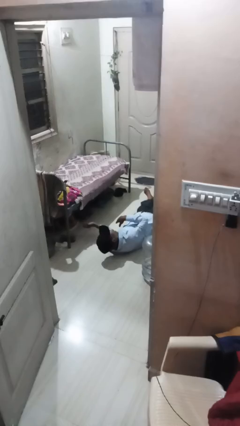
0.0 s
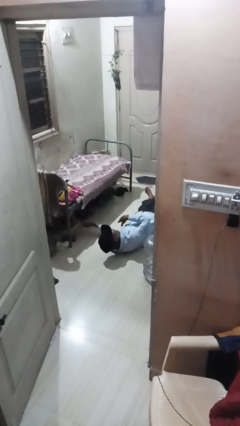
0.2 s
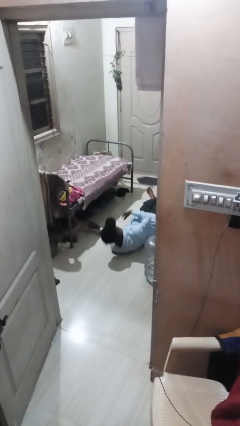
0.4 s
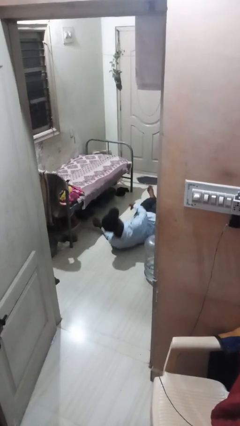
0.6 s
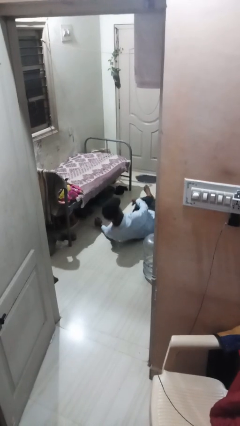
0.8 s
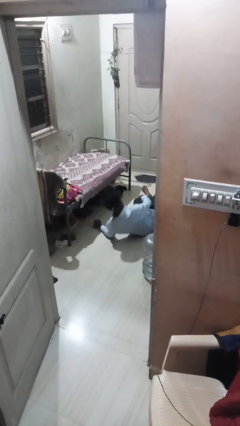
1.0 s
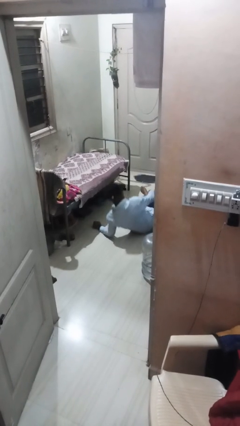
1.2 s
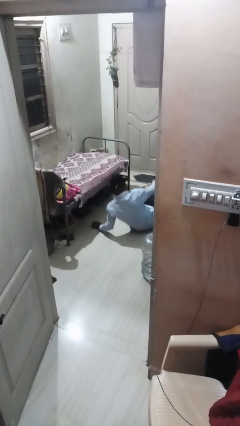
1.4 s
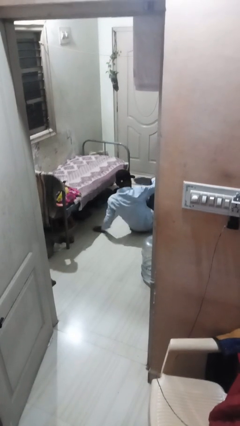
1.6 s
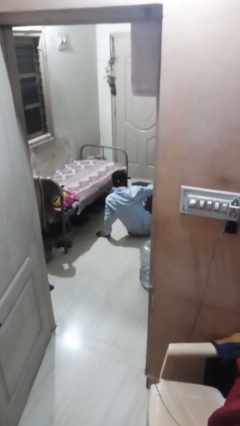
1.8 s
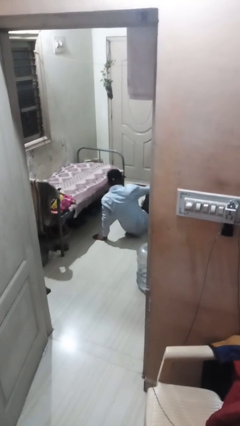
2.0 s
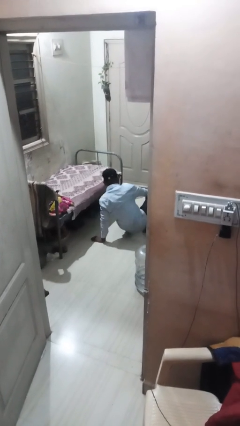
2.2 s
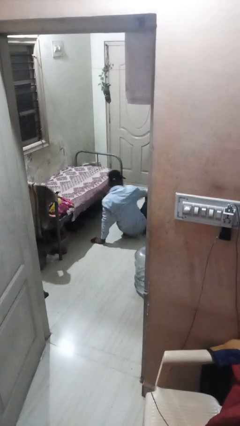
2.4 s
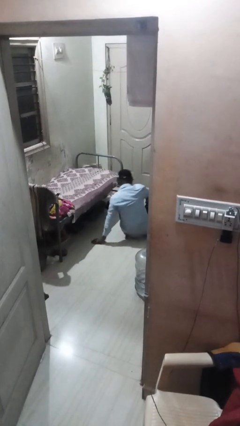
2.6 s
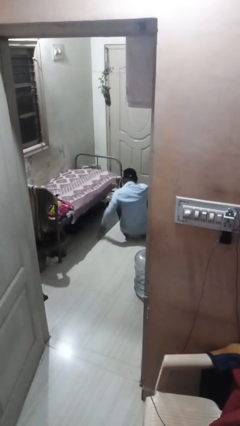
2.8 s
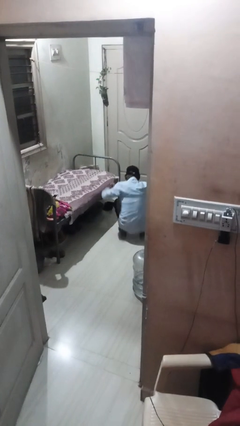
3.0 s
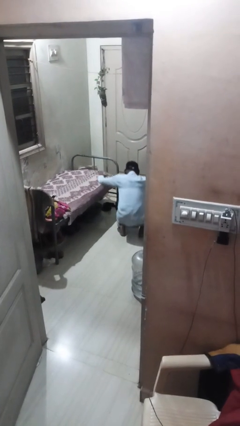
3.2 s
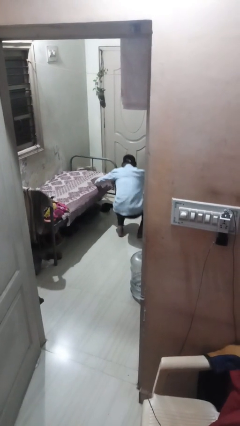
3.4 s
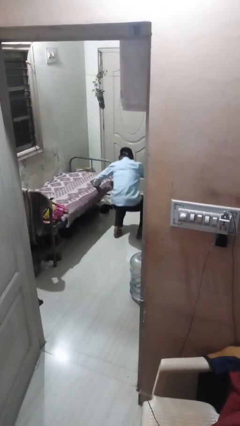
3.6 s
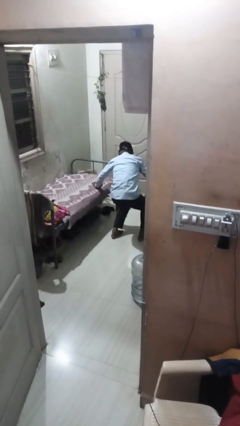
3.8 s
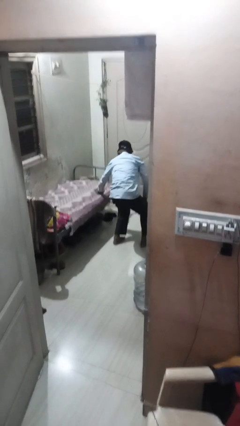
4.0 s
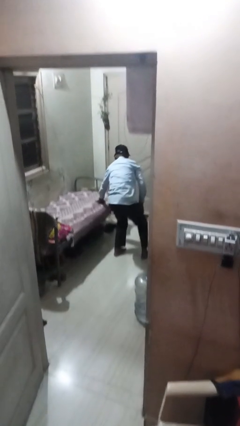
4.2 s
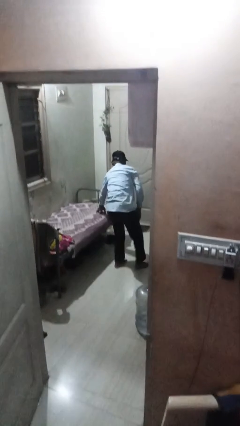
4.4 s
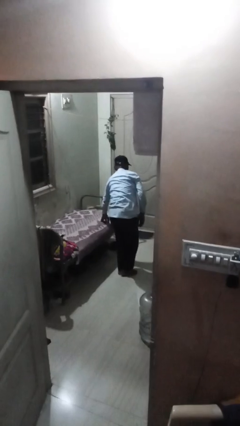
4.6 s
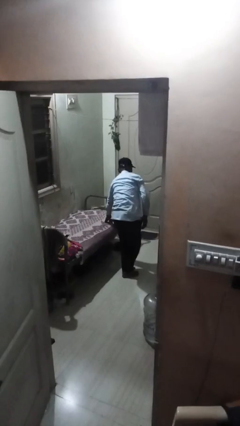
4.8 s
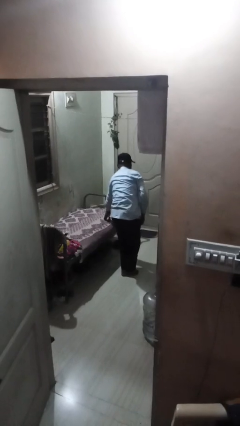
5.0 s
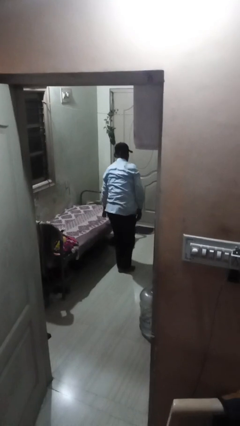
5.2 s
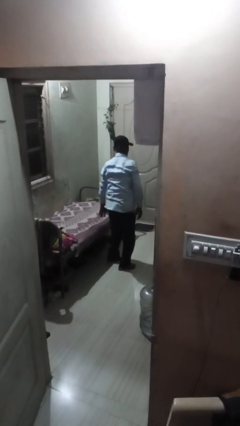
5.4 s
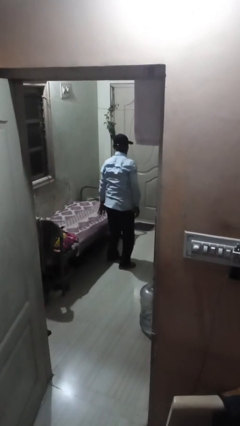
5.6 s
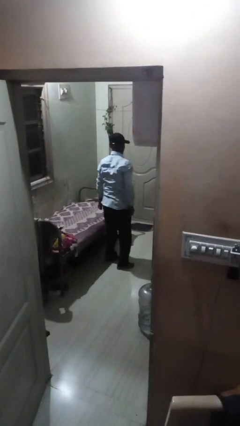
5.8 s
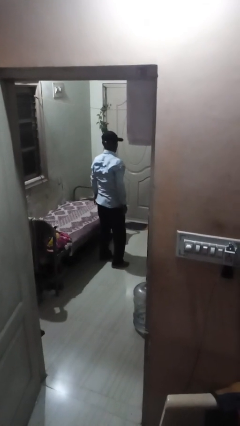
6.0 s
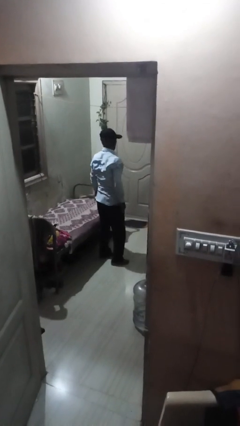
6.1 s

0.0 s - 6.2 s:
person stands up from floor

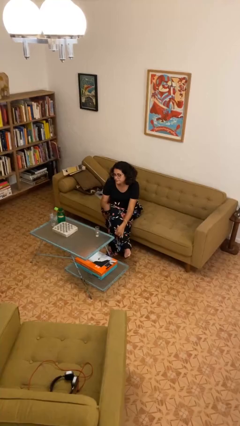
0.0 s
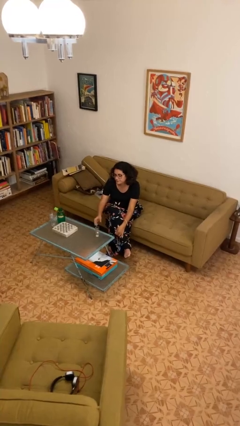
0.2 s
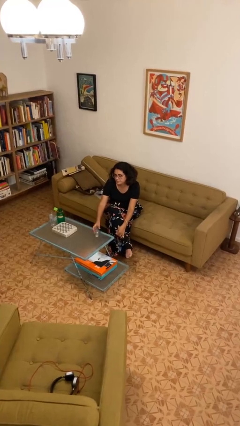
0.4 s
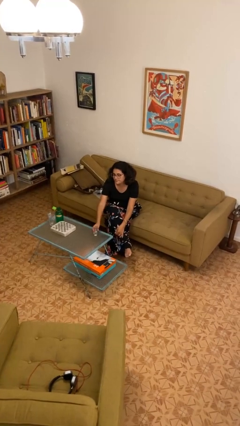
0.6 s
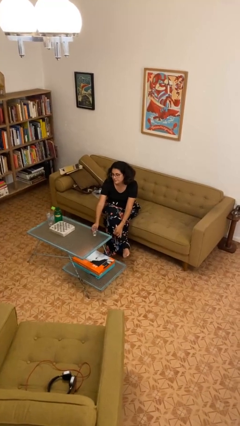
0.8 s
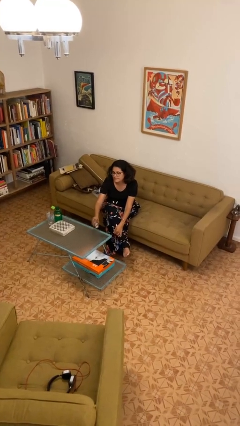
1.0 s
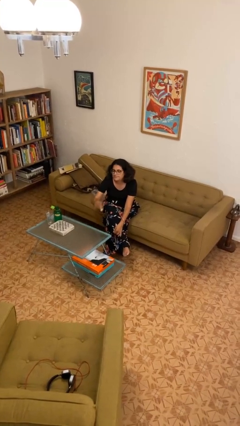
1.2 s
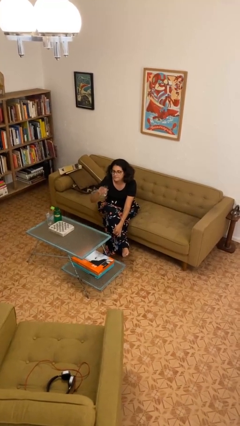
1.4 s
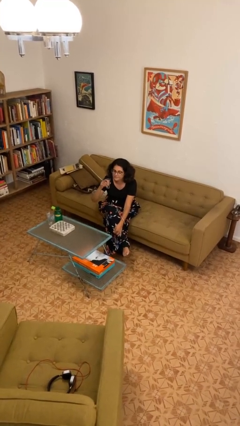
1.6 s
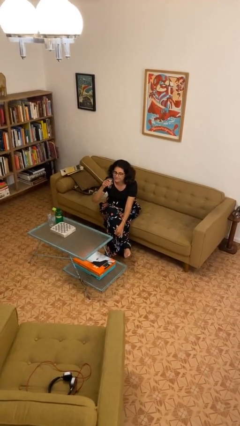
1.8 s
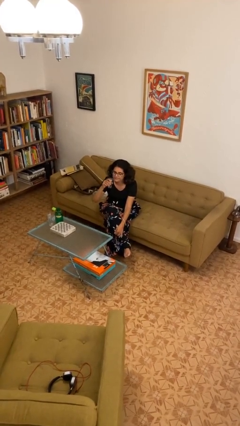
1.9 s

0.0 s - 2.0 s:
person picks up object from table

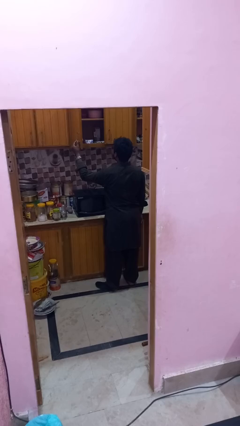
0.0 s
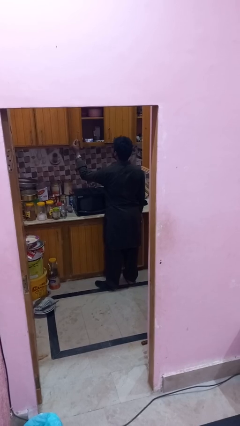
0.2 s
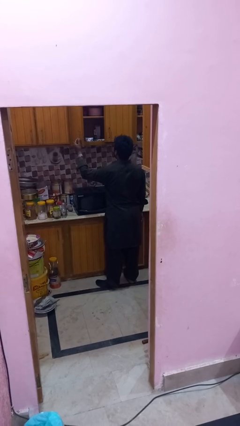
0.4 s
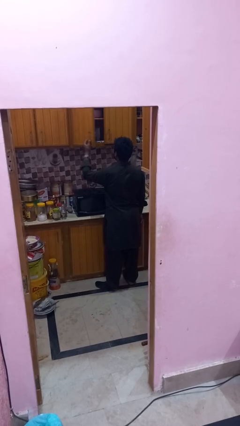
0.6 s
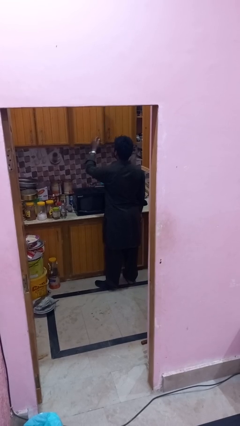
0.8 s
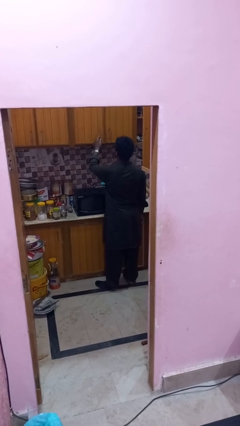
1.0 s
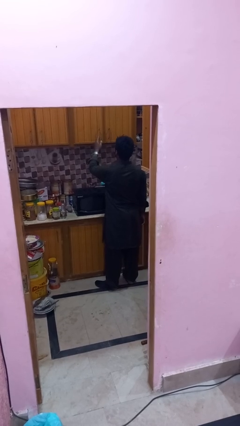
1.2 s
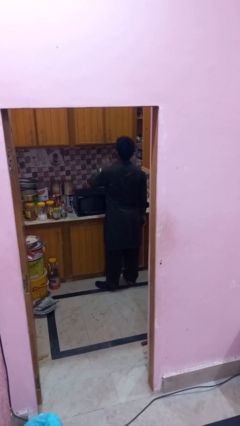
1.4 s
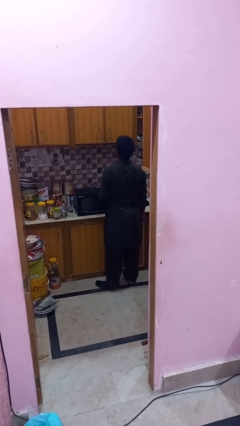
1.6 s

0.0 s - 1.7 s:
person closes cabinet

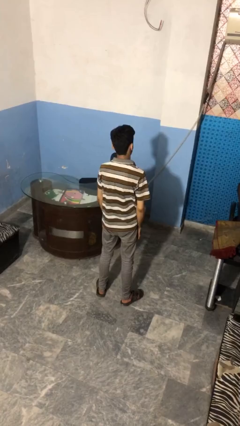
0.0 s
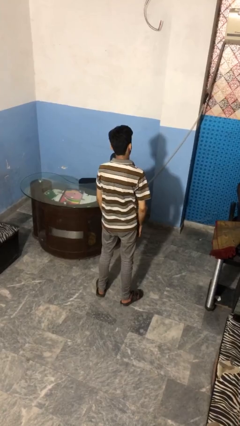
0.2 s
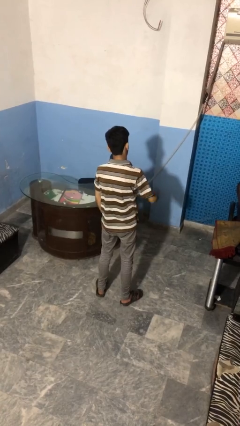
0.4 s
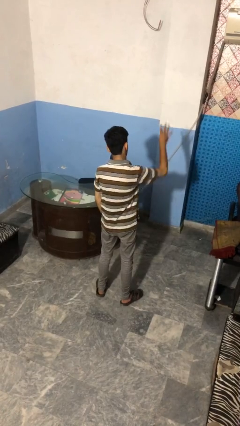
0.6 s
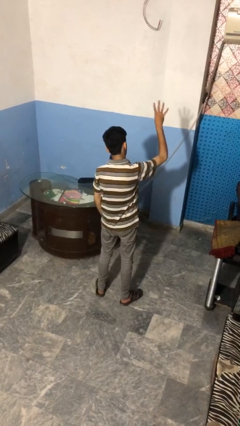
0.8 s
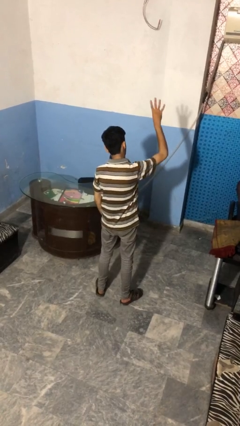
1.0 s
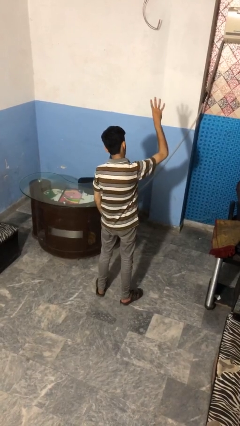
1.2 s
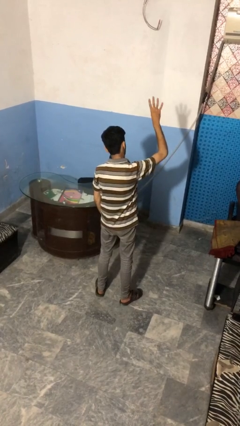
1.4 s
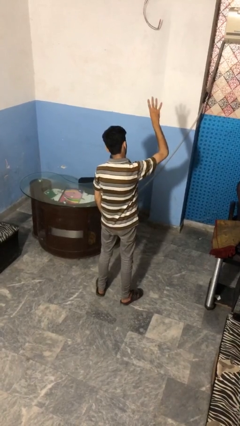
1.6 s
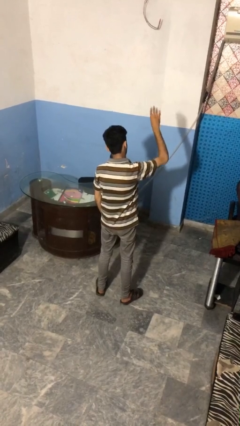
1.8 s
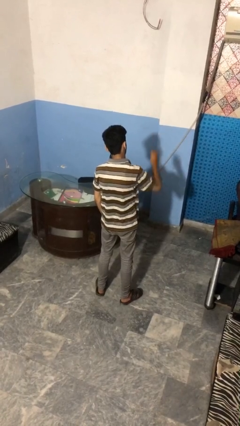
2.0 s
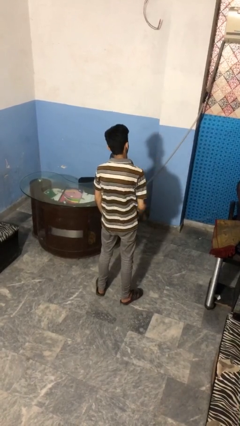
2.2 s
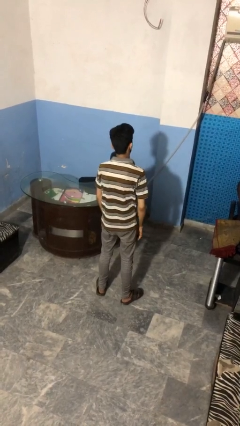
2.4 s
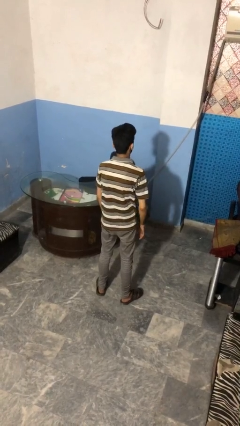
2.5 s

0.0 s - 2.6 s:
person gestures number four

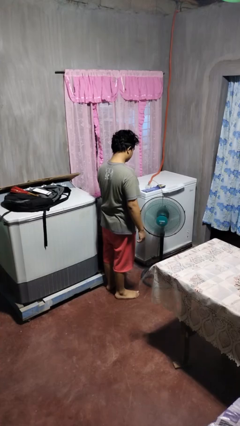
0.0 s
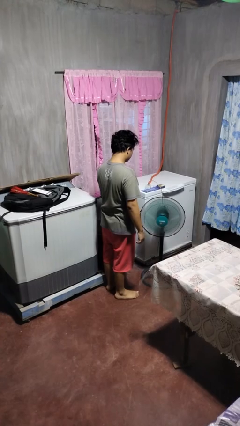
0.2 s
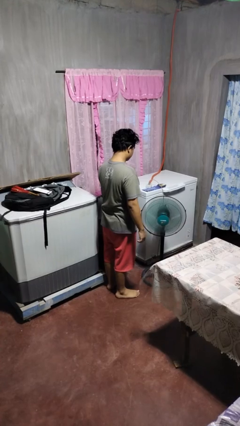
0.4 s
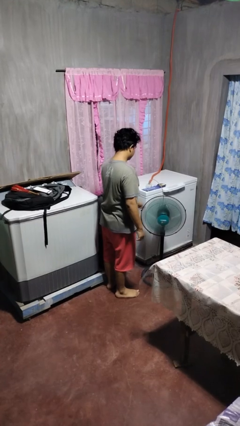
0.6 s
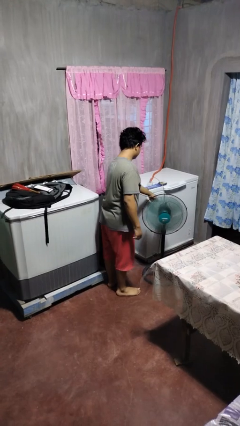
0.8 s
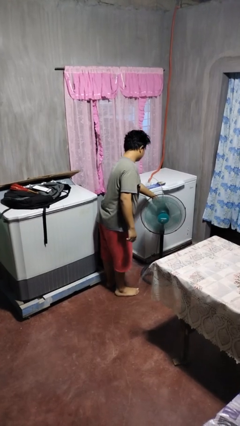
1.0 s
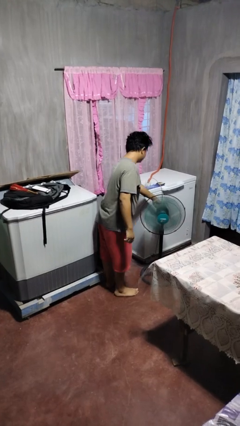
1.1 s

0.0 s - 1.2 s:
person turns on fan

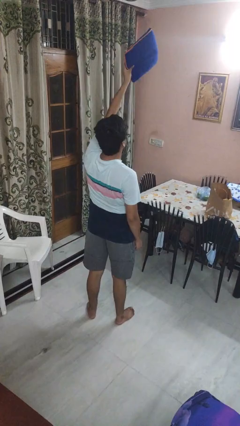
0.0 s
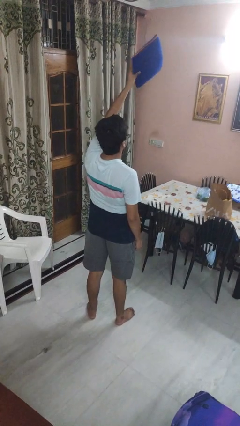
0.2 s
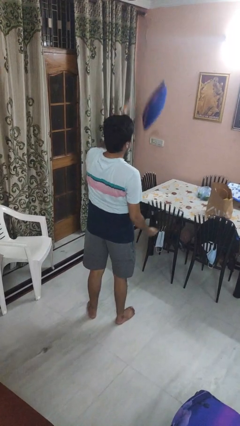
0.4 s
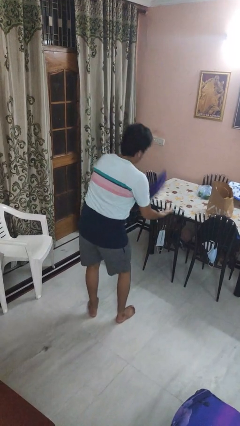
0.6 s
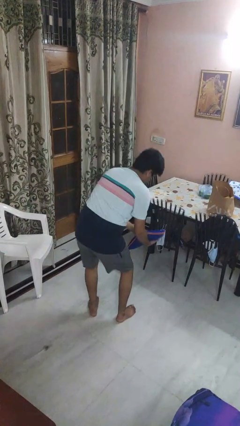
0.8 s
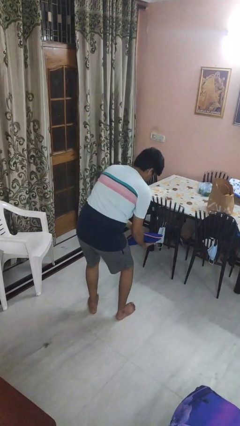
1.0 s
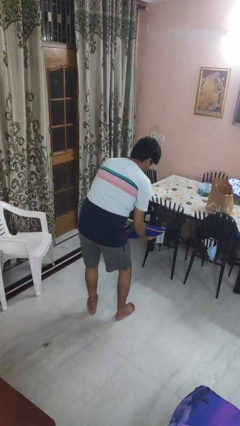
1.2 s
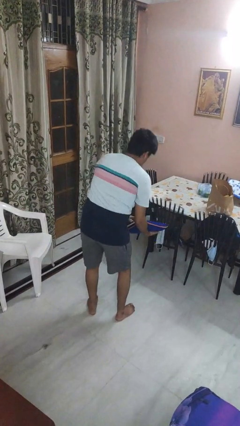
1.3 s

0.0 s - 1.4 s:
person catches dropped object

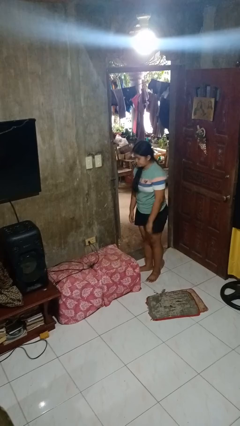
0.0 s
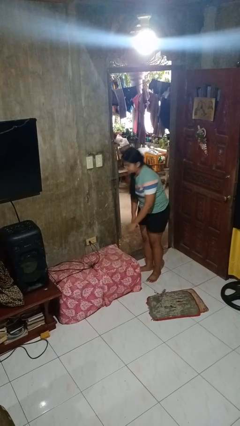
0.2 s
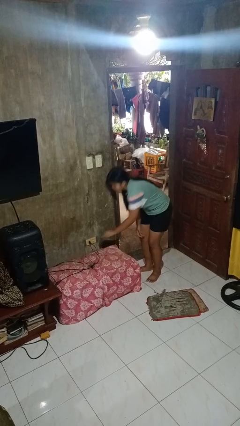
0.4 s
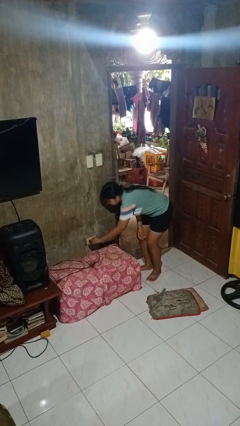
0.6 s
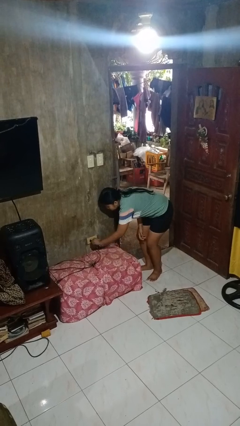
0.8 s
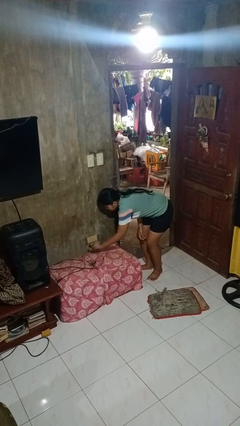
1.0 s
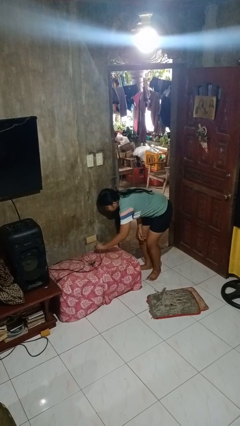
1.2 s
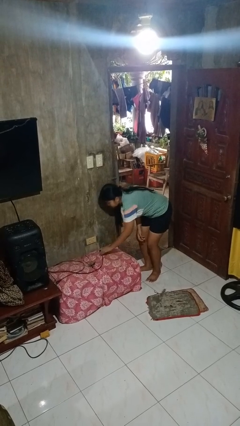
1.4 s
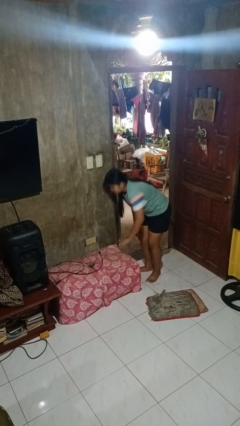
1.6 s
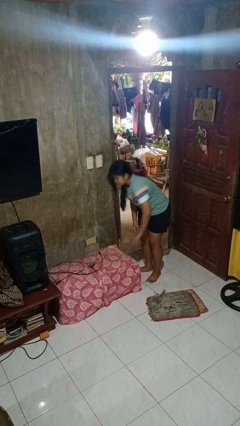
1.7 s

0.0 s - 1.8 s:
person unplugs from electrical socket

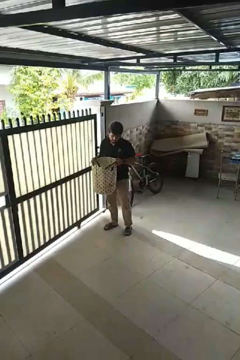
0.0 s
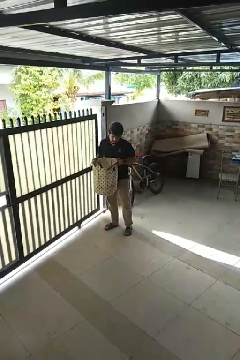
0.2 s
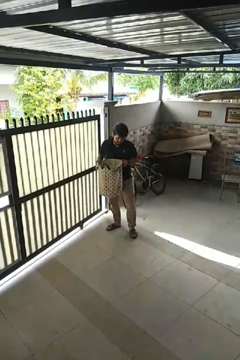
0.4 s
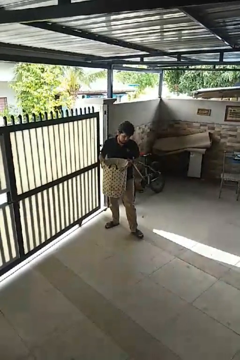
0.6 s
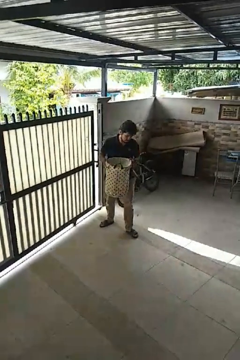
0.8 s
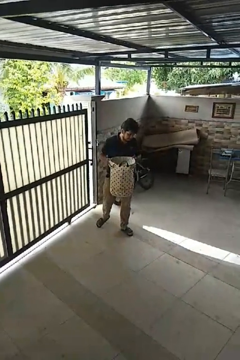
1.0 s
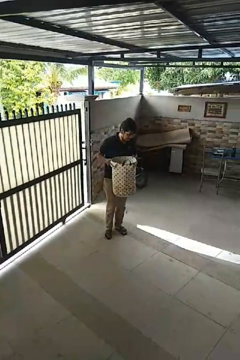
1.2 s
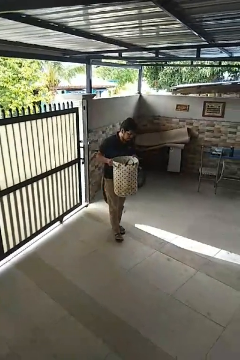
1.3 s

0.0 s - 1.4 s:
person carries laundry basket
